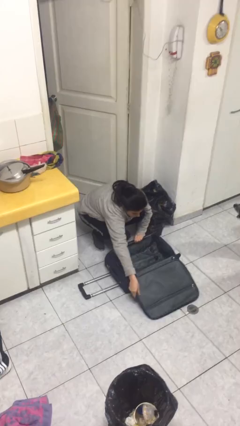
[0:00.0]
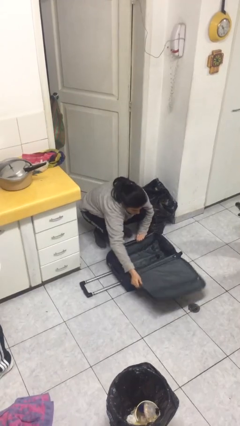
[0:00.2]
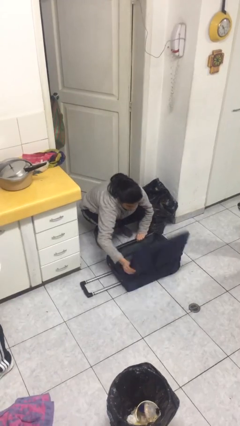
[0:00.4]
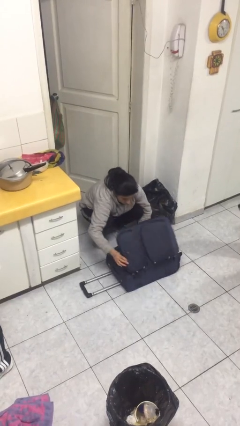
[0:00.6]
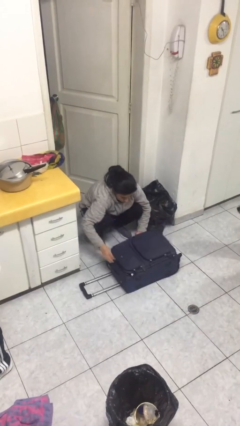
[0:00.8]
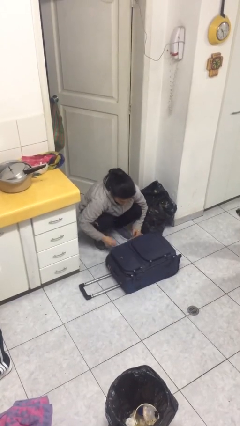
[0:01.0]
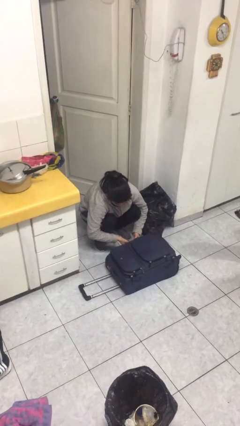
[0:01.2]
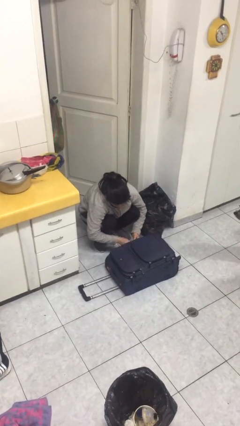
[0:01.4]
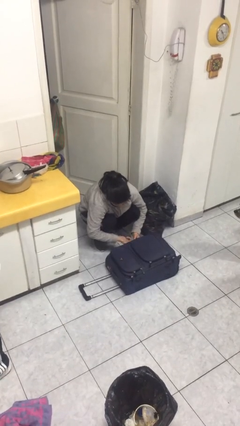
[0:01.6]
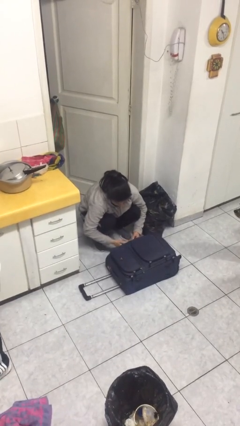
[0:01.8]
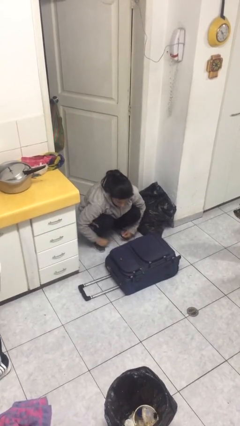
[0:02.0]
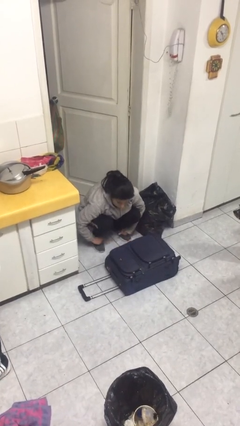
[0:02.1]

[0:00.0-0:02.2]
person closes suitcase

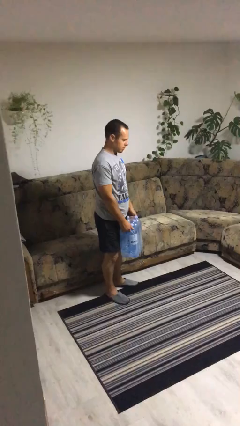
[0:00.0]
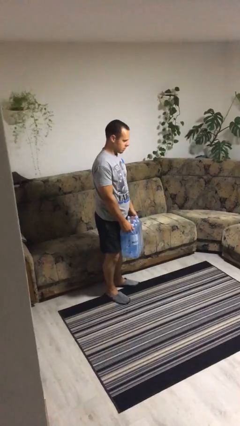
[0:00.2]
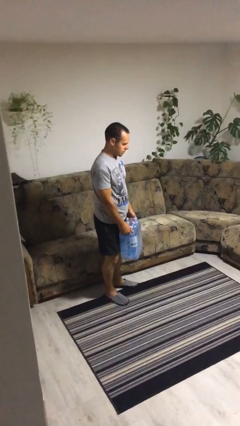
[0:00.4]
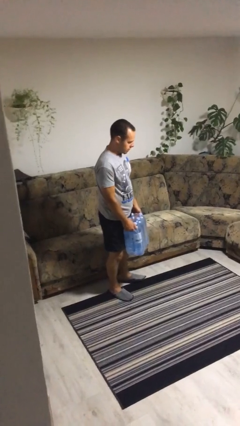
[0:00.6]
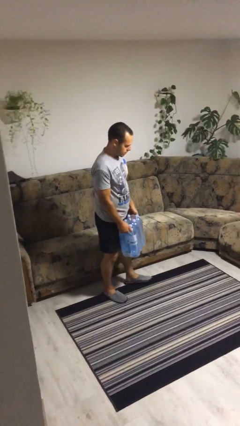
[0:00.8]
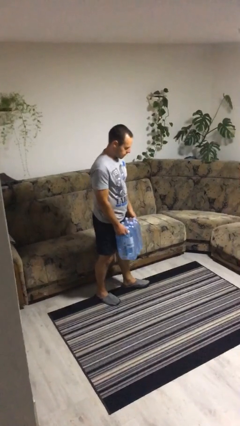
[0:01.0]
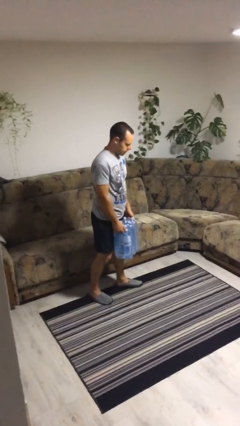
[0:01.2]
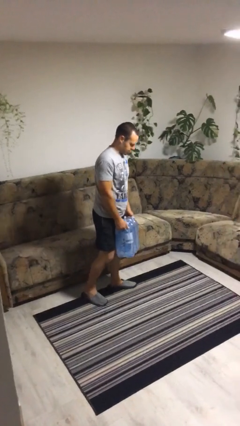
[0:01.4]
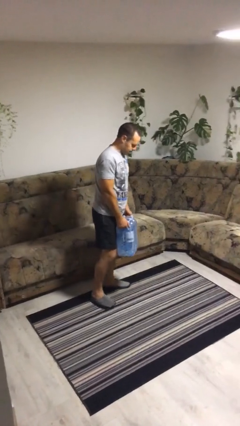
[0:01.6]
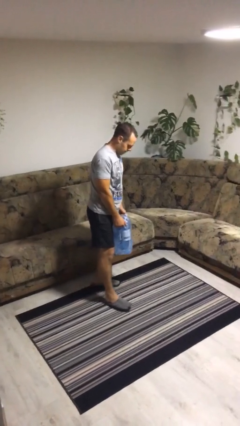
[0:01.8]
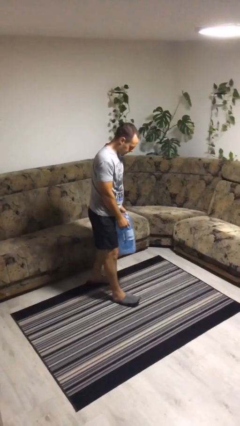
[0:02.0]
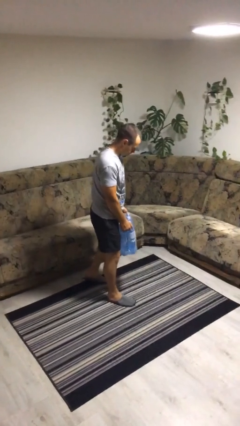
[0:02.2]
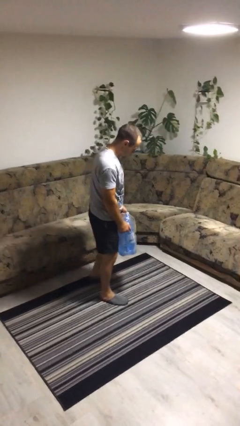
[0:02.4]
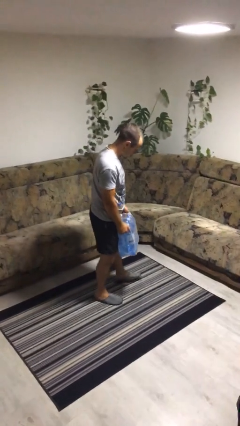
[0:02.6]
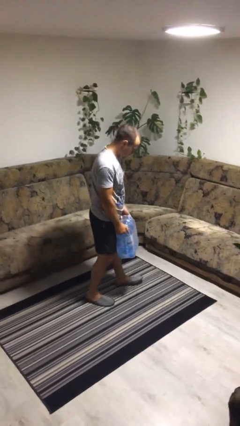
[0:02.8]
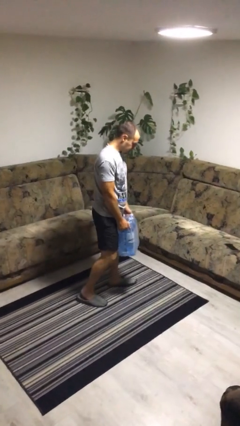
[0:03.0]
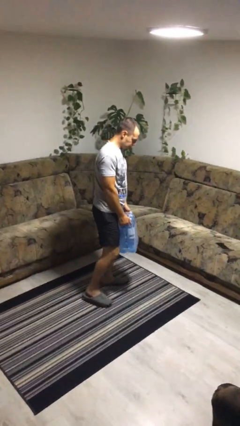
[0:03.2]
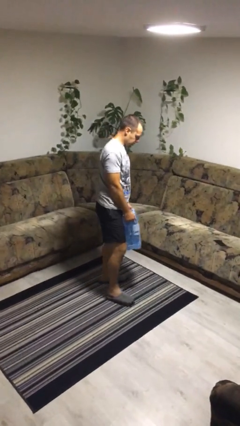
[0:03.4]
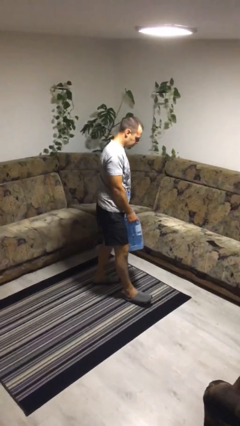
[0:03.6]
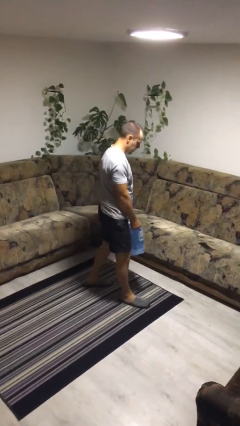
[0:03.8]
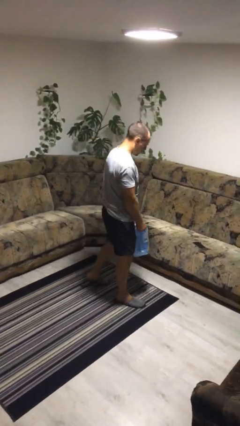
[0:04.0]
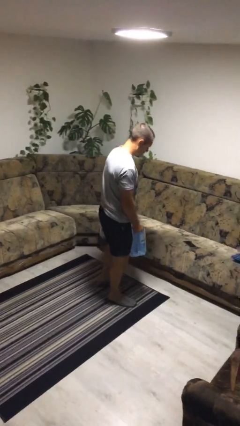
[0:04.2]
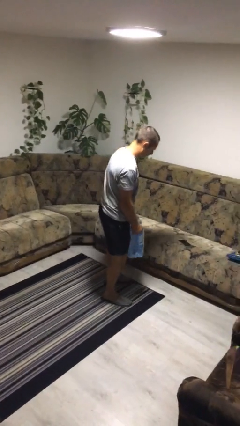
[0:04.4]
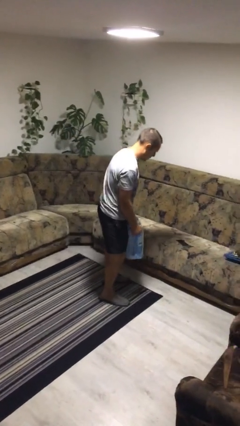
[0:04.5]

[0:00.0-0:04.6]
person carries heavy object

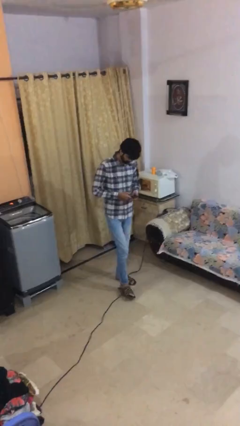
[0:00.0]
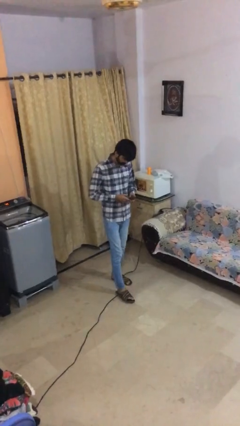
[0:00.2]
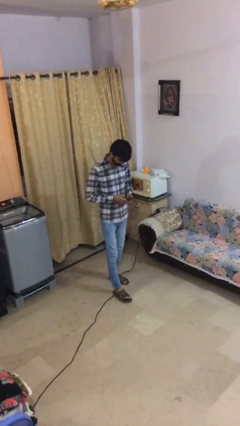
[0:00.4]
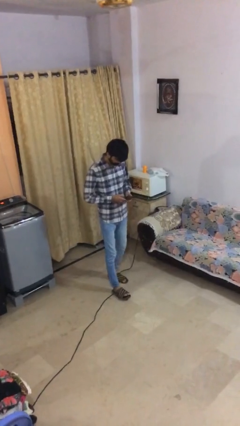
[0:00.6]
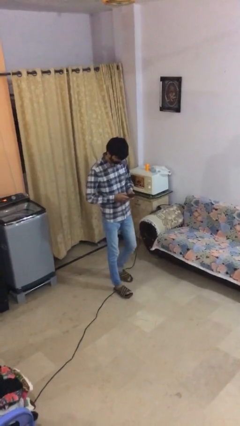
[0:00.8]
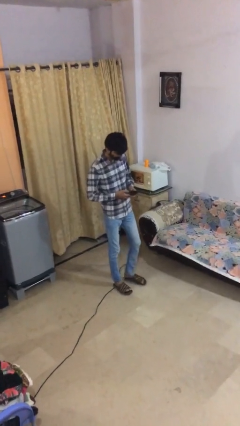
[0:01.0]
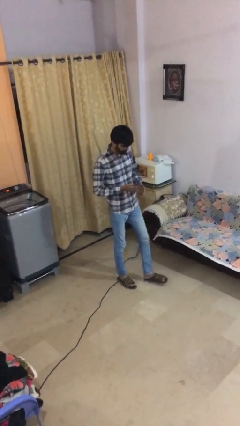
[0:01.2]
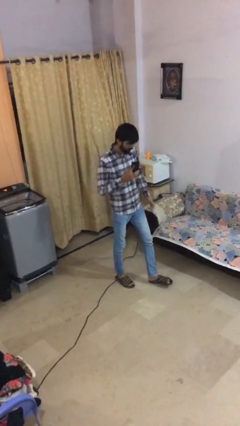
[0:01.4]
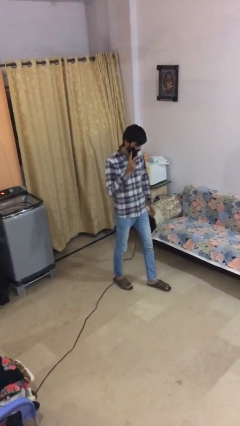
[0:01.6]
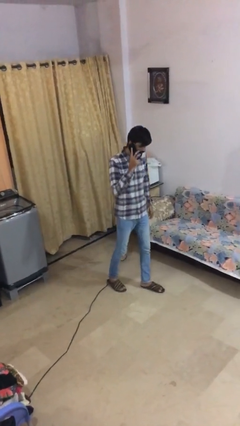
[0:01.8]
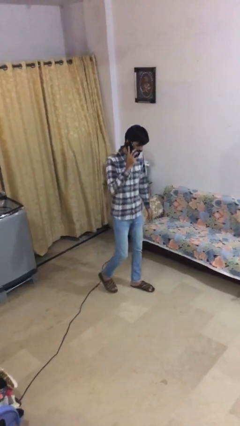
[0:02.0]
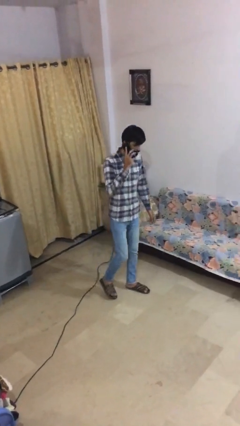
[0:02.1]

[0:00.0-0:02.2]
person talks on phone

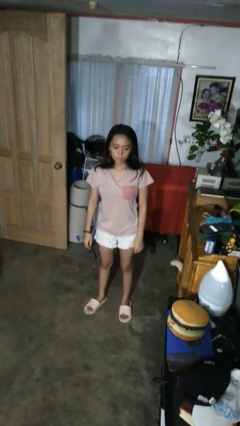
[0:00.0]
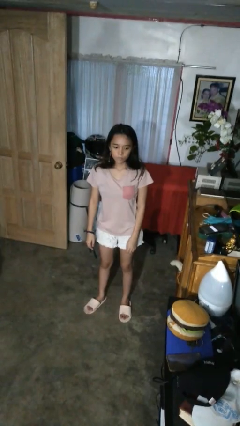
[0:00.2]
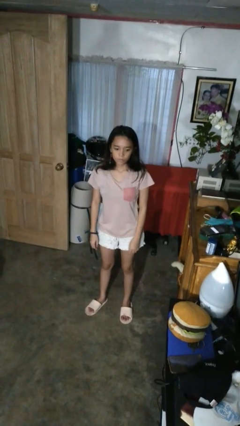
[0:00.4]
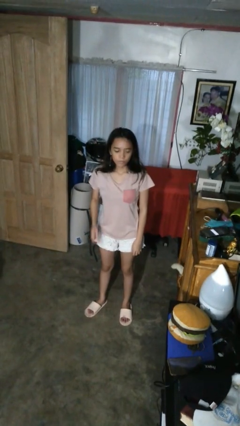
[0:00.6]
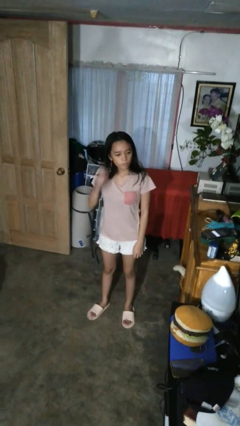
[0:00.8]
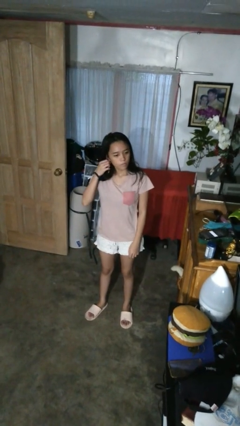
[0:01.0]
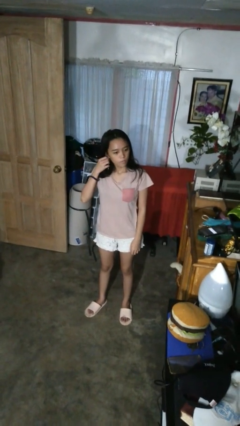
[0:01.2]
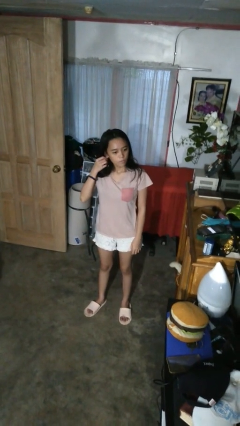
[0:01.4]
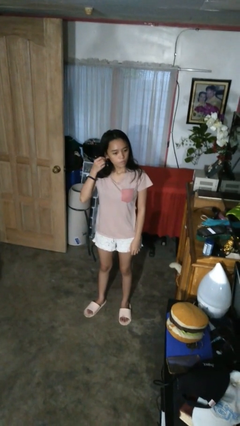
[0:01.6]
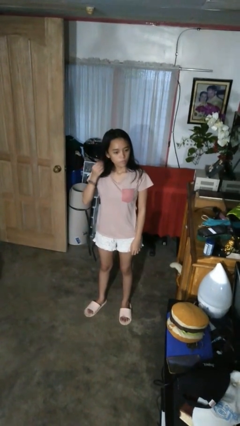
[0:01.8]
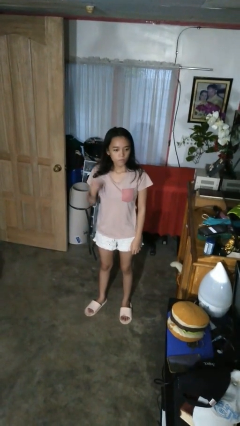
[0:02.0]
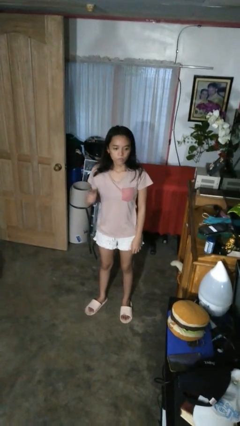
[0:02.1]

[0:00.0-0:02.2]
person takes off earrings

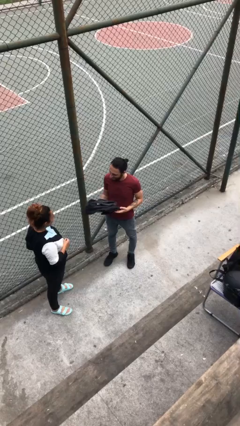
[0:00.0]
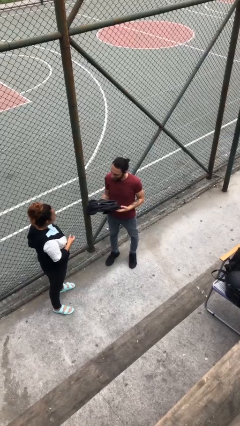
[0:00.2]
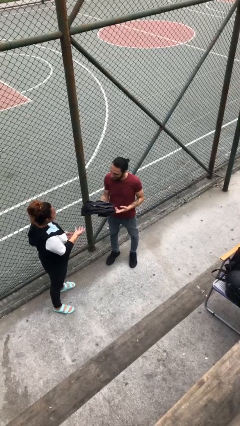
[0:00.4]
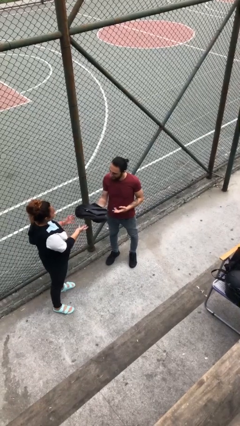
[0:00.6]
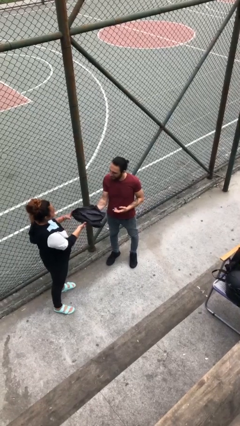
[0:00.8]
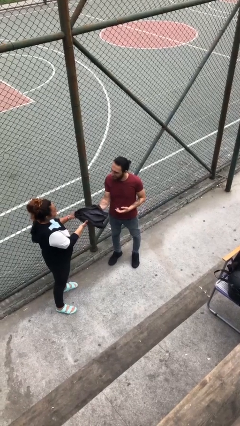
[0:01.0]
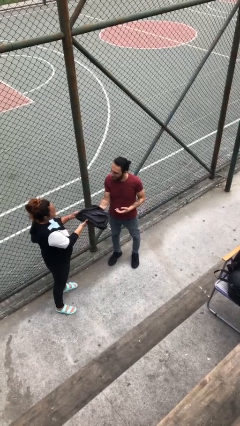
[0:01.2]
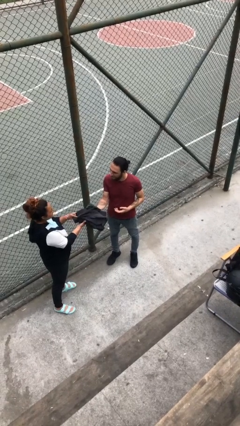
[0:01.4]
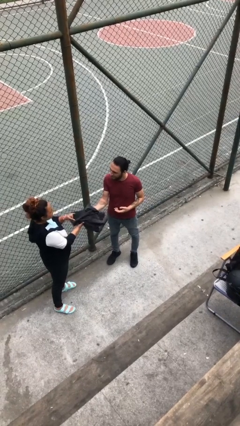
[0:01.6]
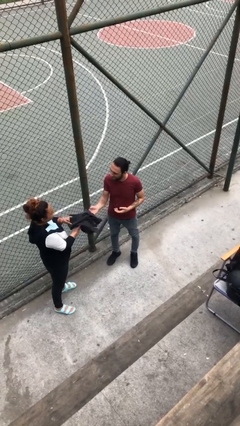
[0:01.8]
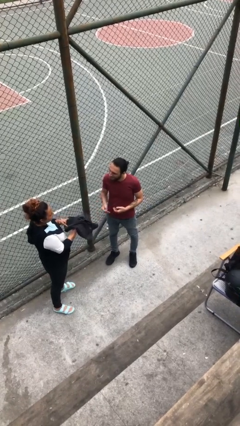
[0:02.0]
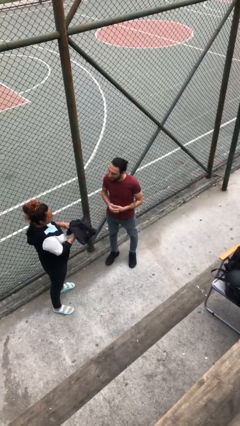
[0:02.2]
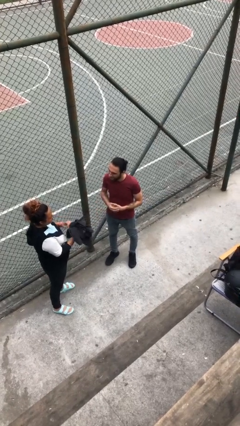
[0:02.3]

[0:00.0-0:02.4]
person transfers object to person

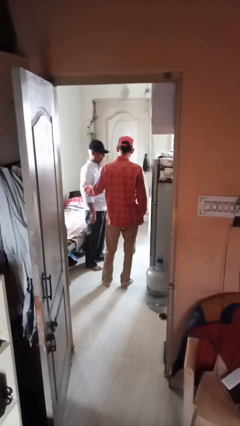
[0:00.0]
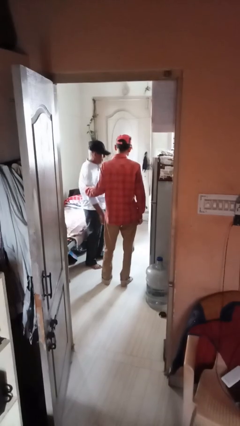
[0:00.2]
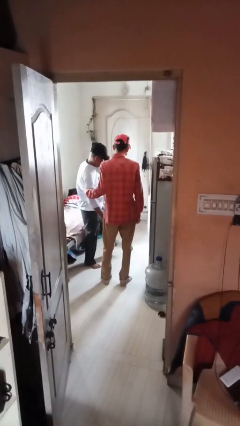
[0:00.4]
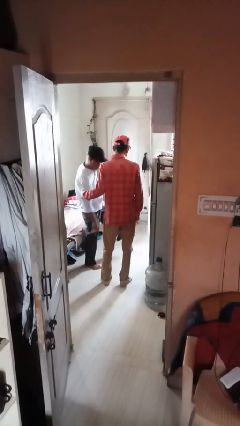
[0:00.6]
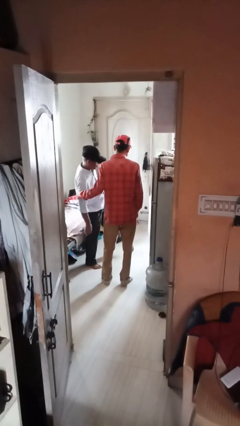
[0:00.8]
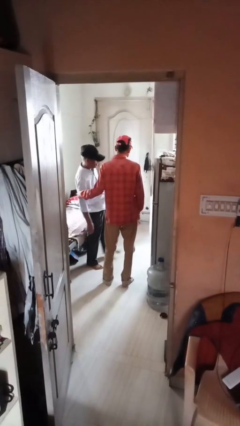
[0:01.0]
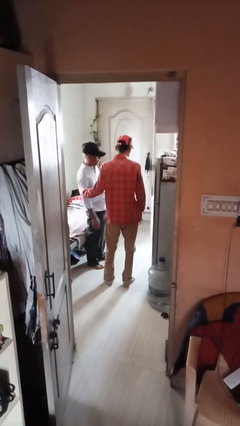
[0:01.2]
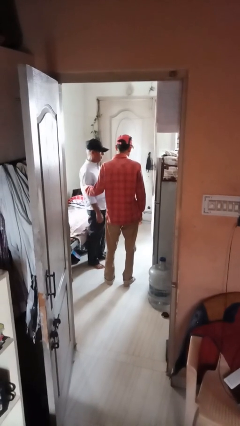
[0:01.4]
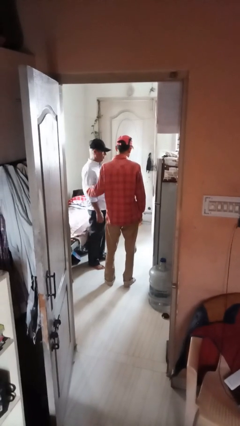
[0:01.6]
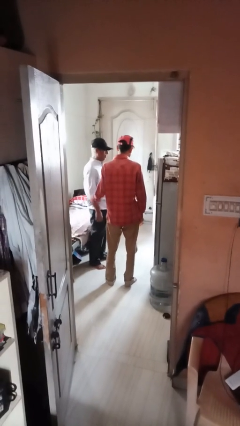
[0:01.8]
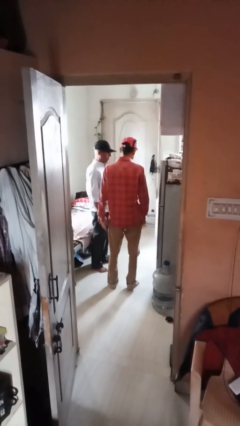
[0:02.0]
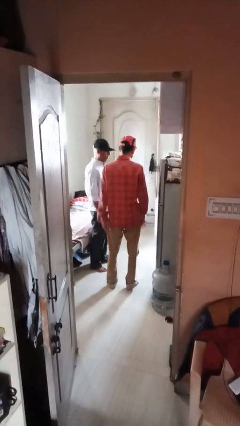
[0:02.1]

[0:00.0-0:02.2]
person grabs person by bicep

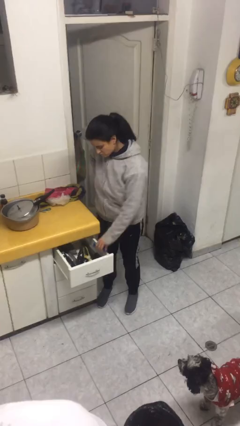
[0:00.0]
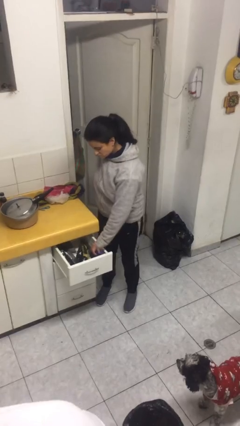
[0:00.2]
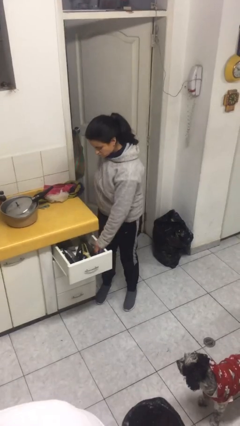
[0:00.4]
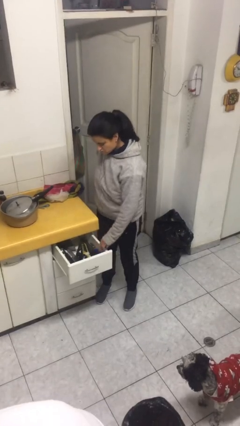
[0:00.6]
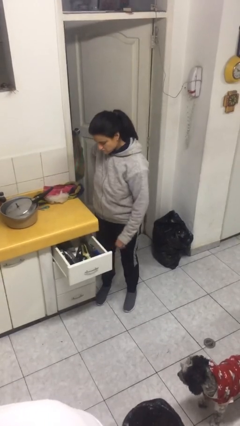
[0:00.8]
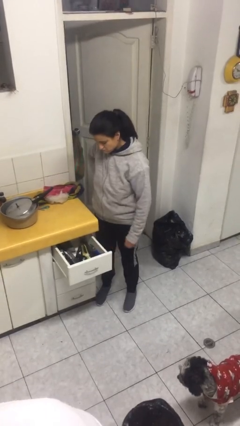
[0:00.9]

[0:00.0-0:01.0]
person puts object into kitchen drawer
